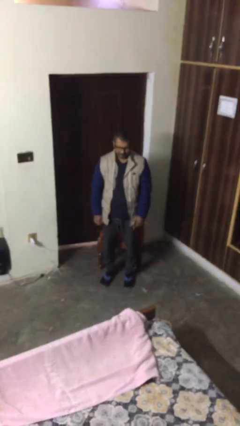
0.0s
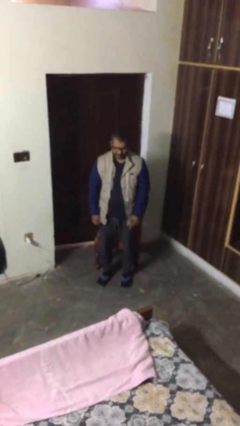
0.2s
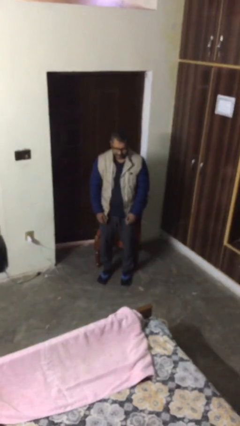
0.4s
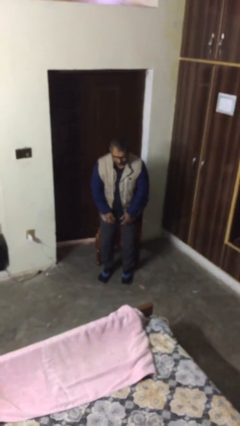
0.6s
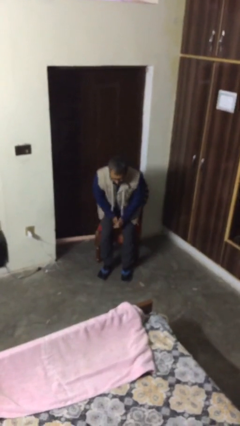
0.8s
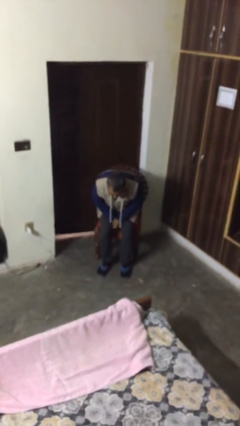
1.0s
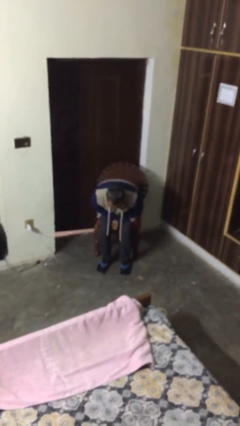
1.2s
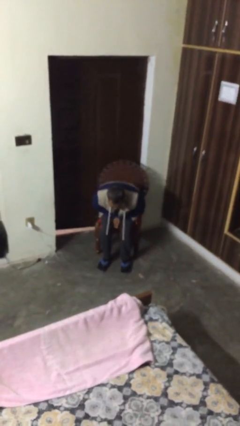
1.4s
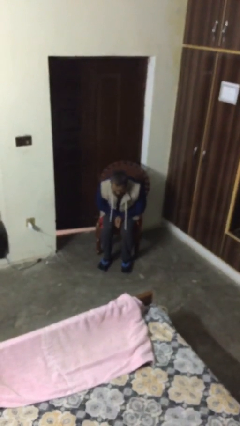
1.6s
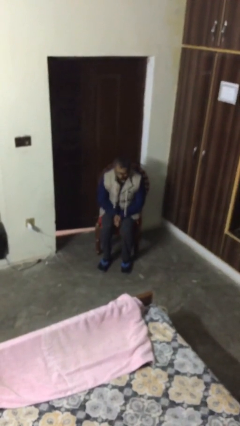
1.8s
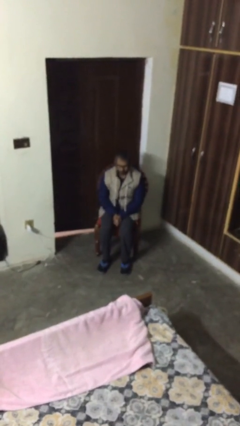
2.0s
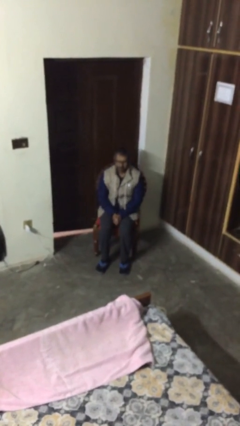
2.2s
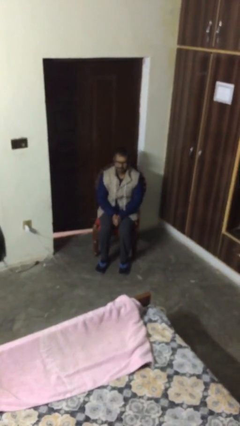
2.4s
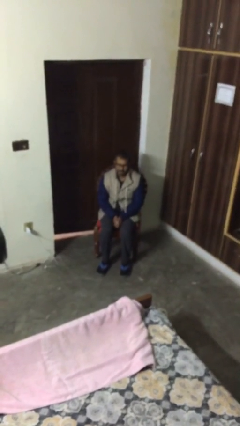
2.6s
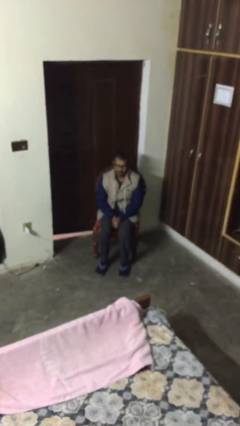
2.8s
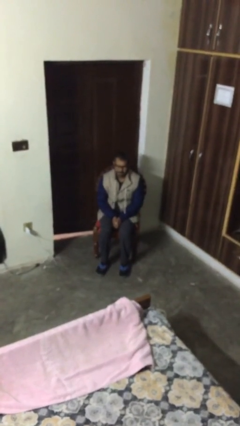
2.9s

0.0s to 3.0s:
person sits down

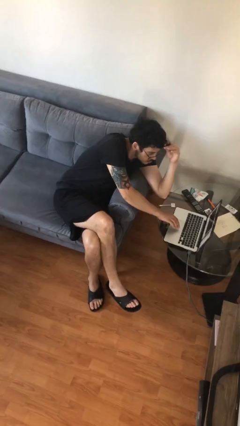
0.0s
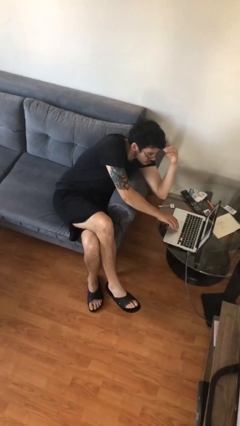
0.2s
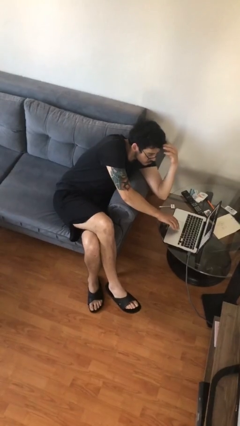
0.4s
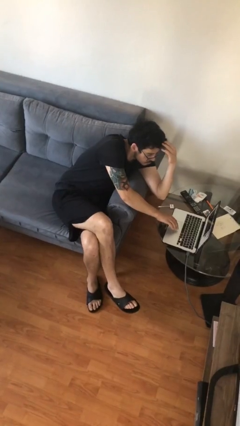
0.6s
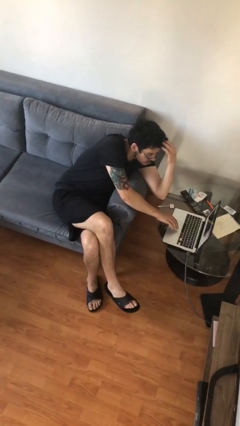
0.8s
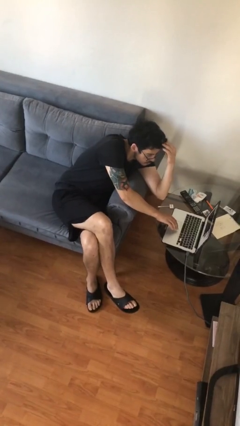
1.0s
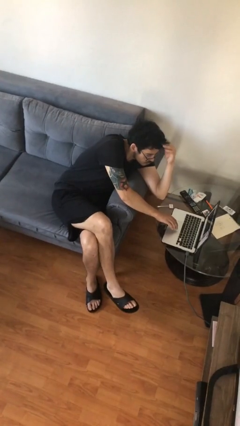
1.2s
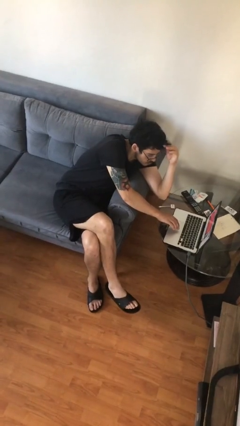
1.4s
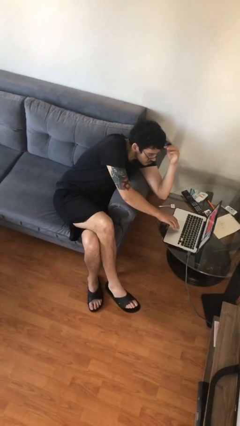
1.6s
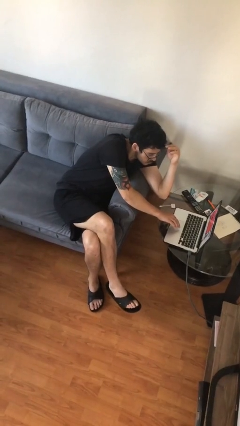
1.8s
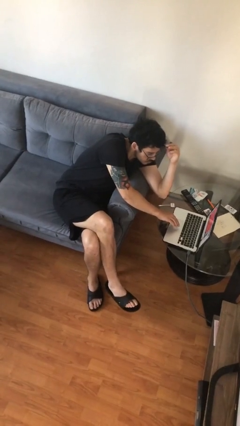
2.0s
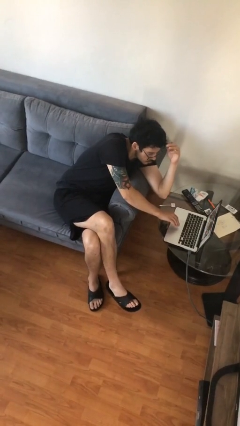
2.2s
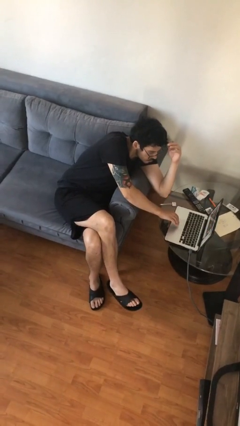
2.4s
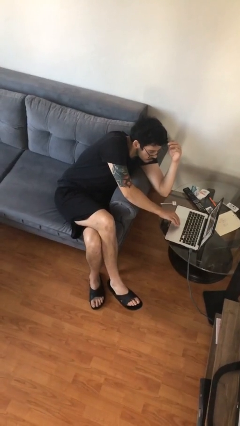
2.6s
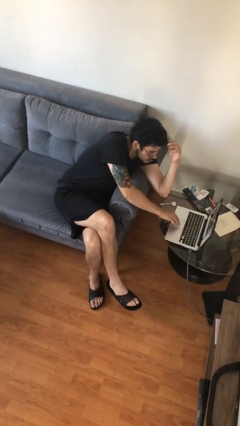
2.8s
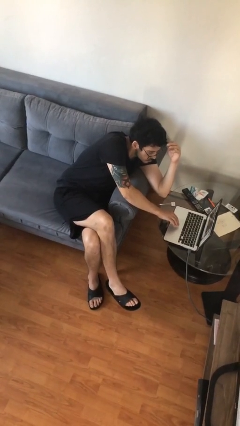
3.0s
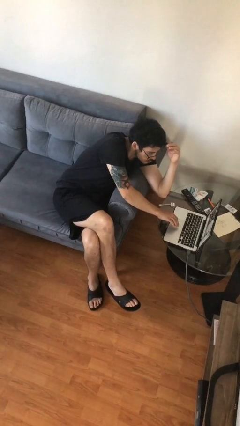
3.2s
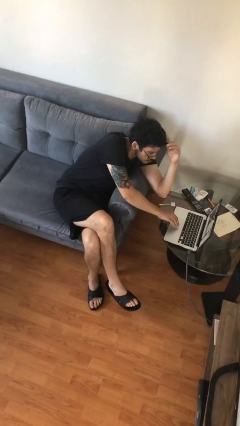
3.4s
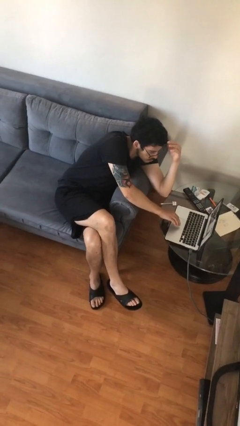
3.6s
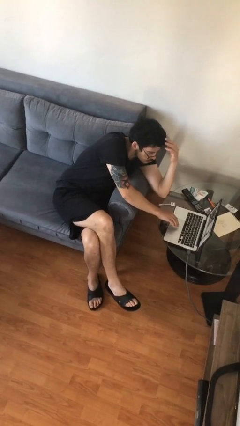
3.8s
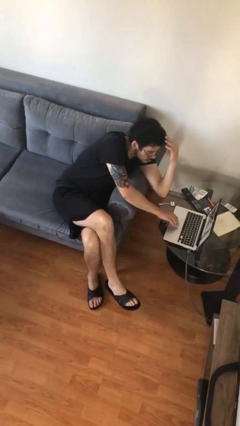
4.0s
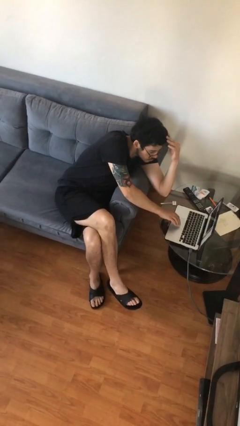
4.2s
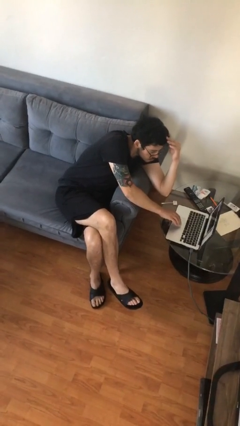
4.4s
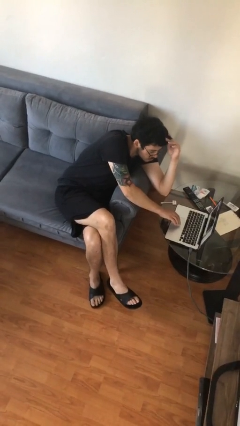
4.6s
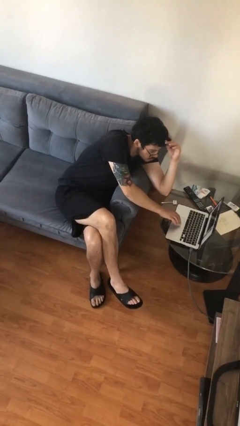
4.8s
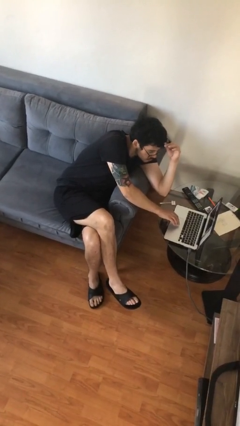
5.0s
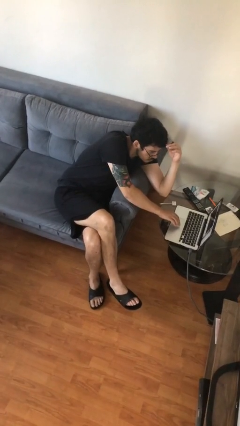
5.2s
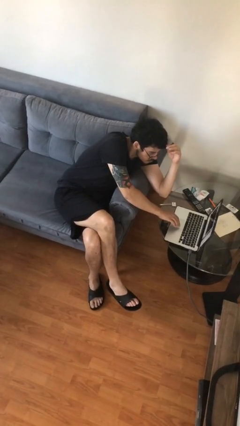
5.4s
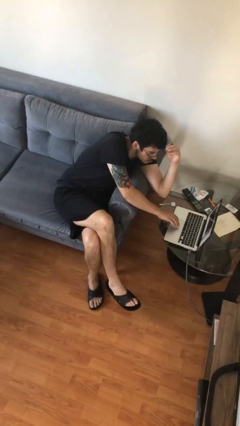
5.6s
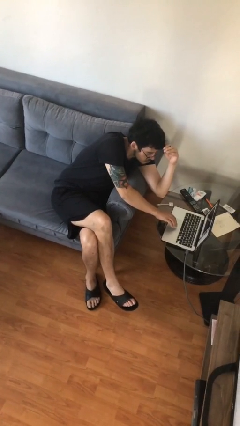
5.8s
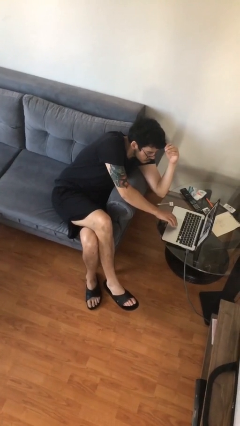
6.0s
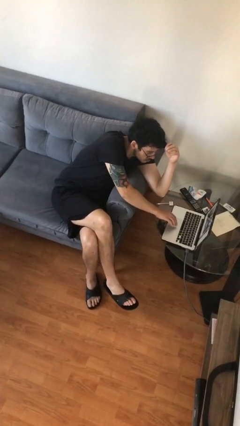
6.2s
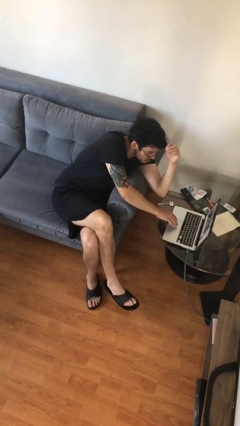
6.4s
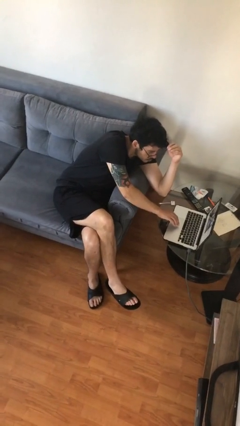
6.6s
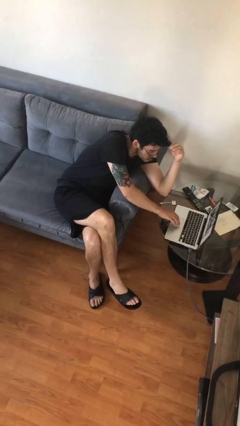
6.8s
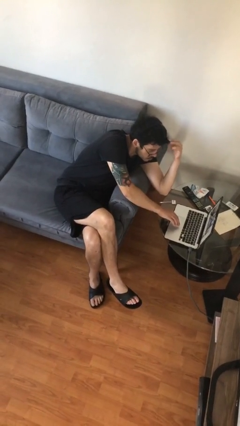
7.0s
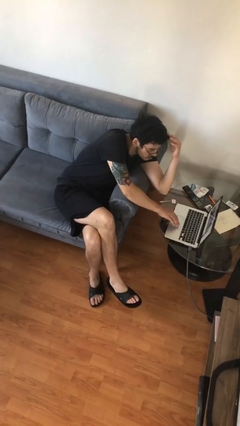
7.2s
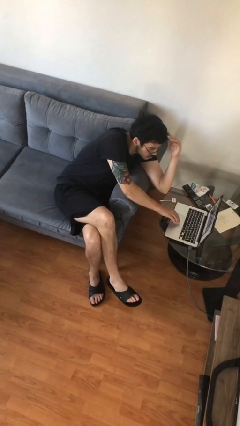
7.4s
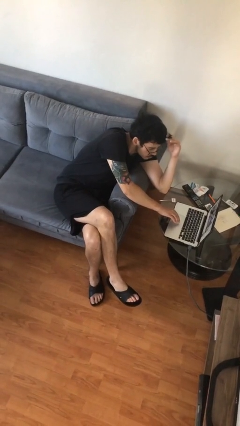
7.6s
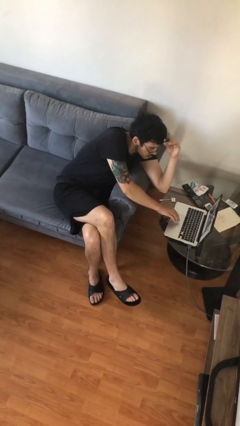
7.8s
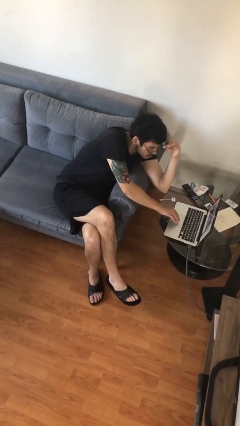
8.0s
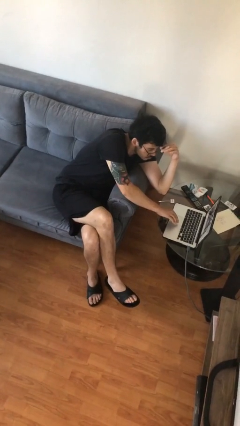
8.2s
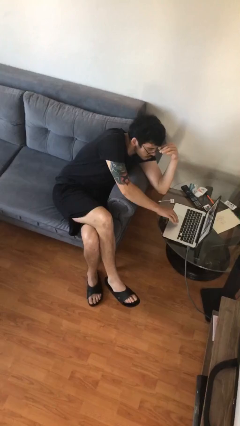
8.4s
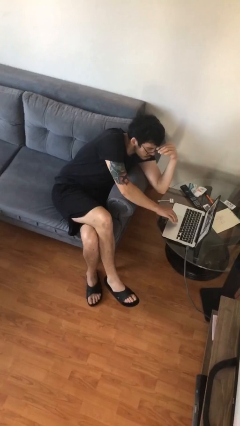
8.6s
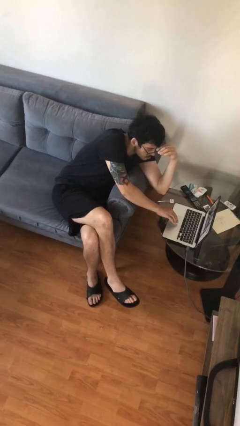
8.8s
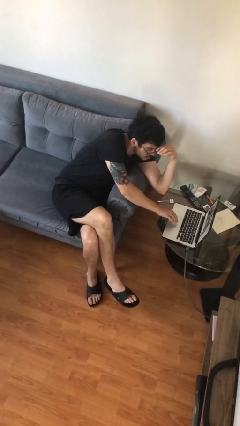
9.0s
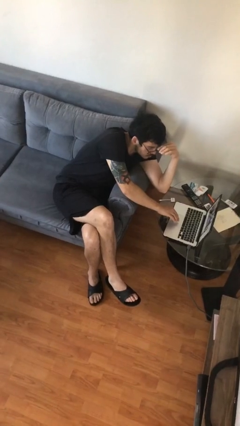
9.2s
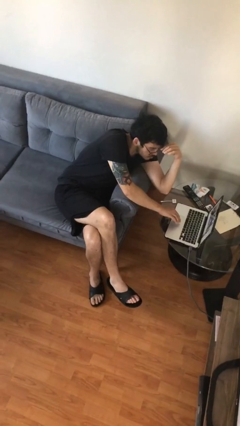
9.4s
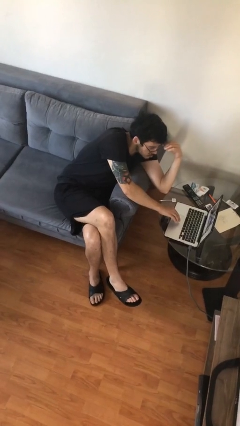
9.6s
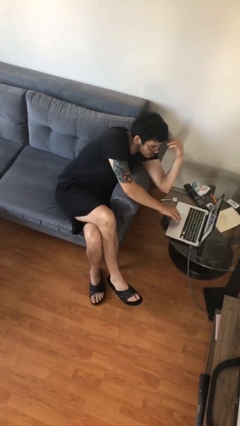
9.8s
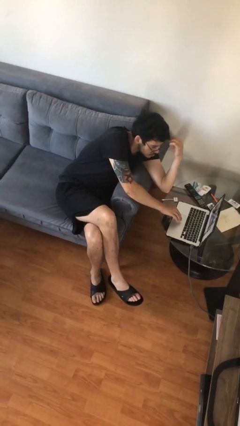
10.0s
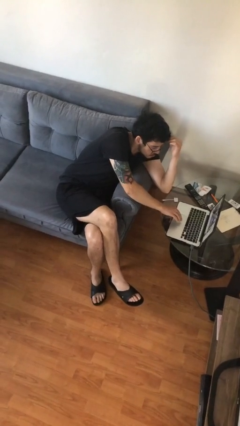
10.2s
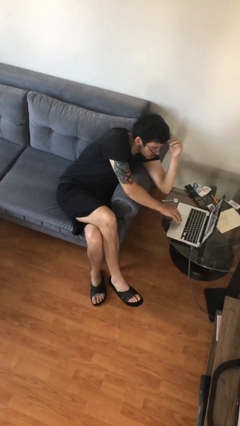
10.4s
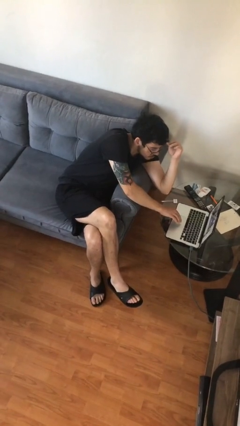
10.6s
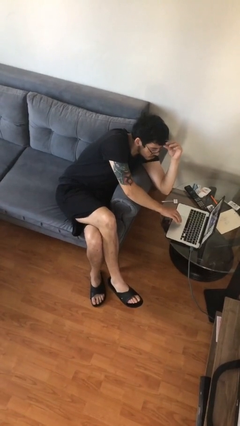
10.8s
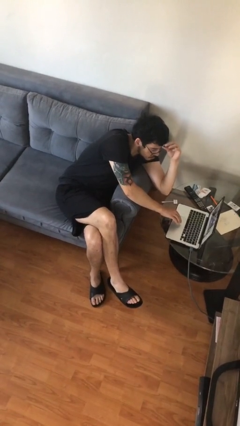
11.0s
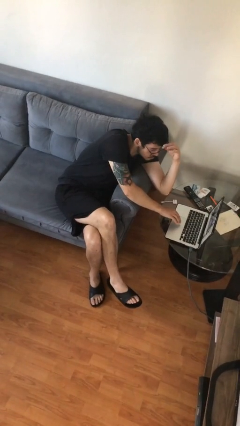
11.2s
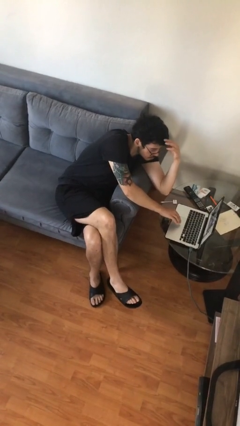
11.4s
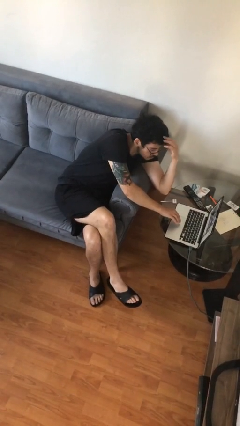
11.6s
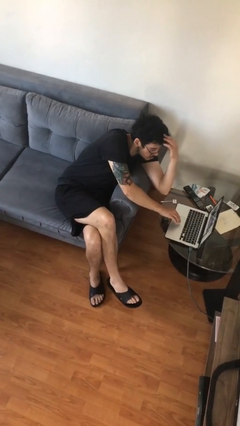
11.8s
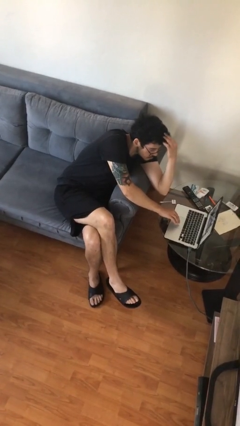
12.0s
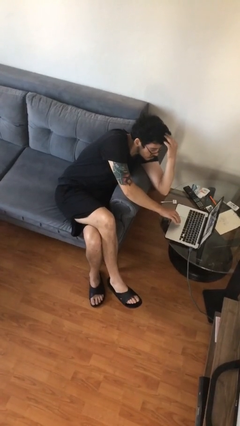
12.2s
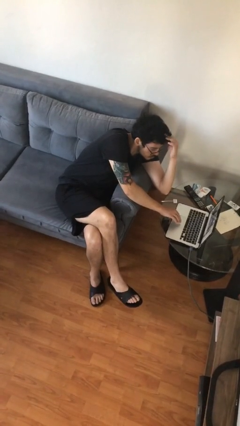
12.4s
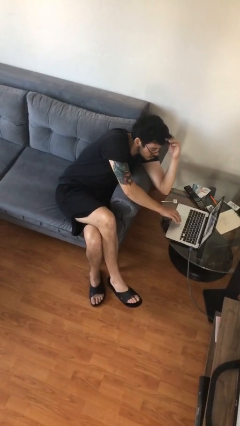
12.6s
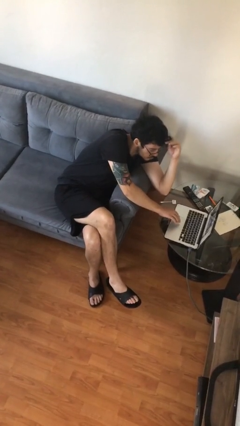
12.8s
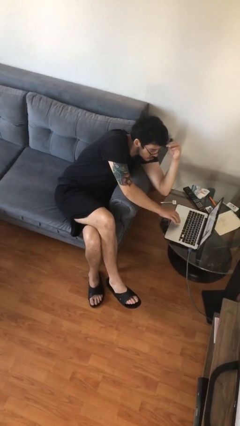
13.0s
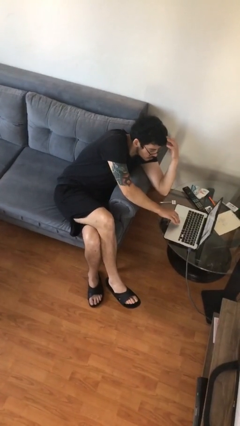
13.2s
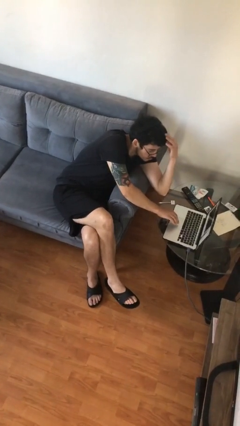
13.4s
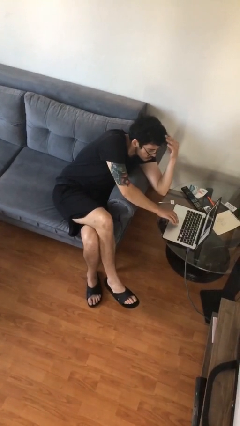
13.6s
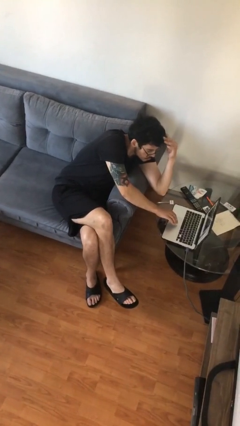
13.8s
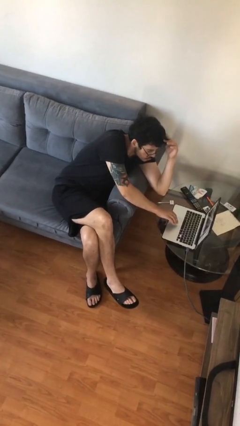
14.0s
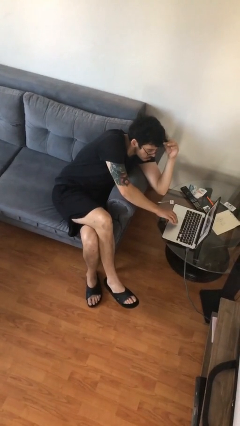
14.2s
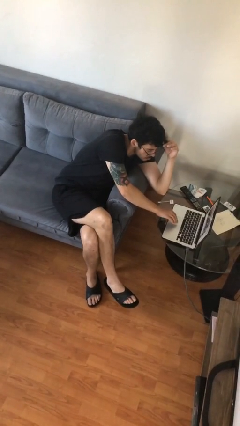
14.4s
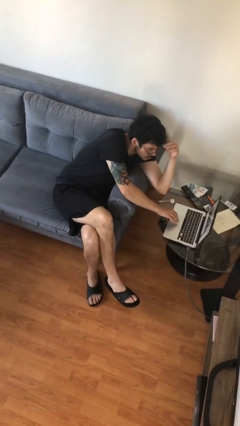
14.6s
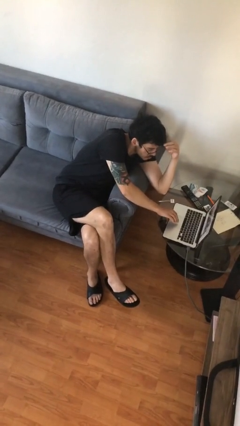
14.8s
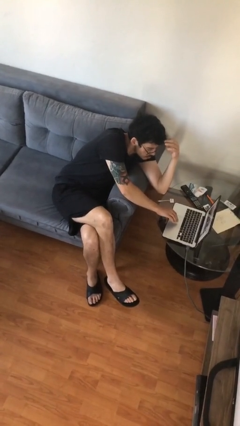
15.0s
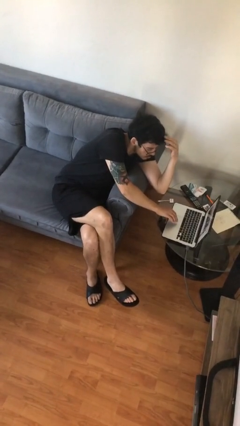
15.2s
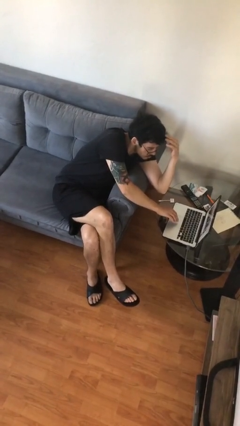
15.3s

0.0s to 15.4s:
person interacts with laptop

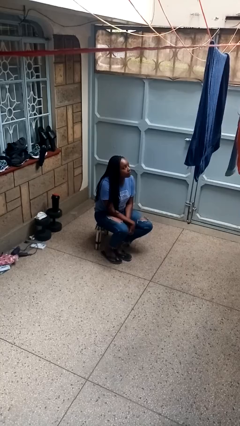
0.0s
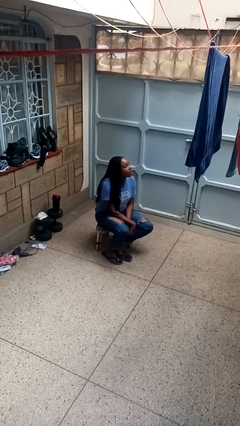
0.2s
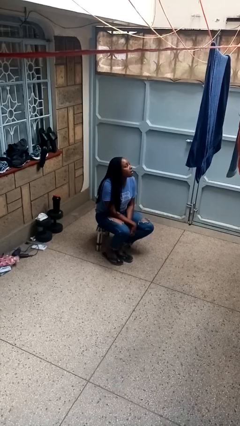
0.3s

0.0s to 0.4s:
person sticks out tongue
